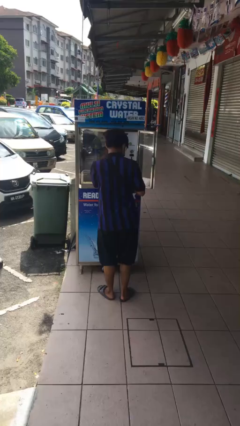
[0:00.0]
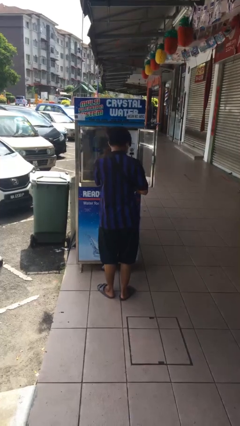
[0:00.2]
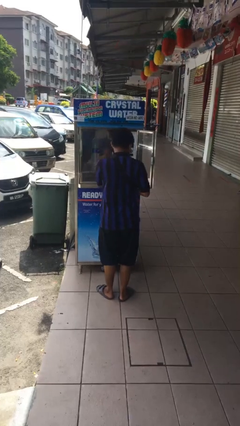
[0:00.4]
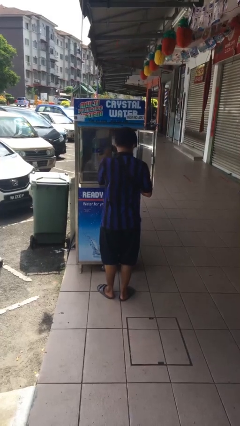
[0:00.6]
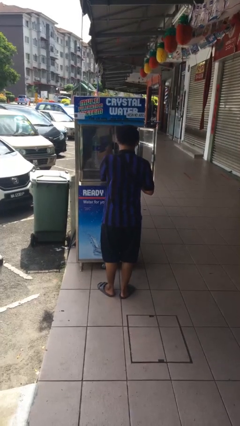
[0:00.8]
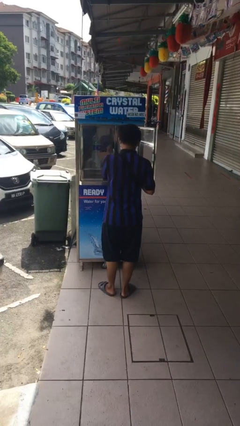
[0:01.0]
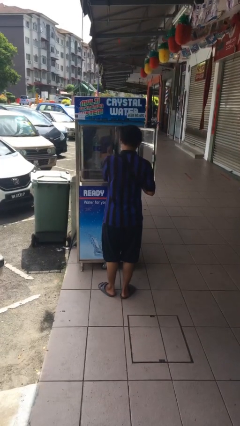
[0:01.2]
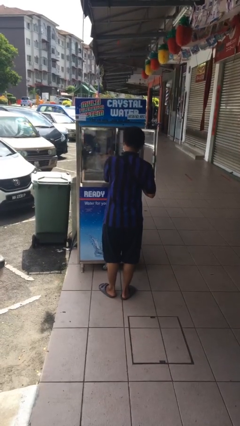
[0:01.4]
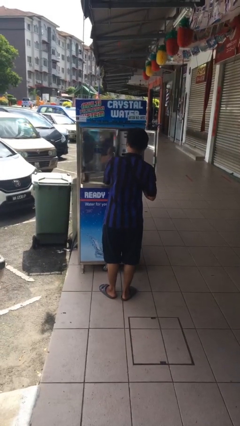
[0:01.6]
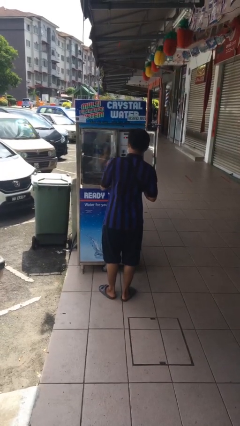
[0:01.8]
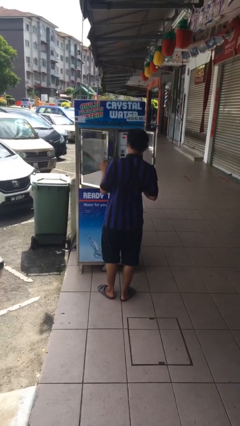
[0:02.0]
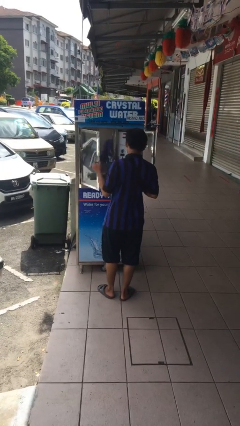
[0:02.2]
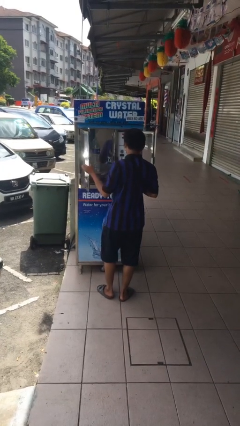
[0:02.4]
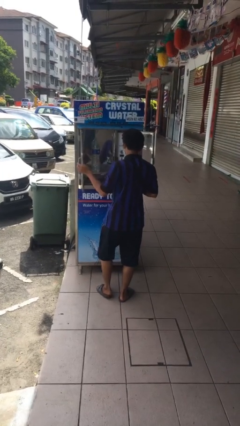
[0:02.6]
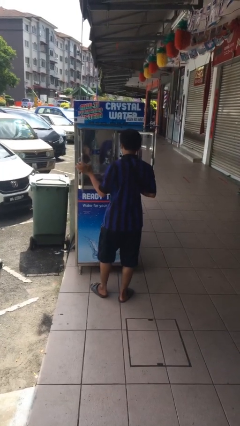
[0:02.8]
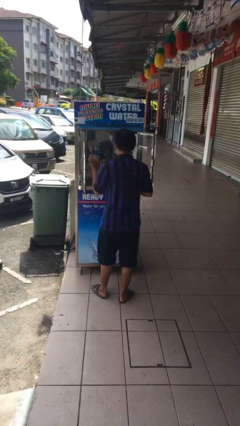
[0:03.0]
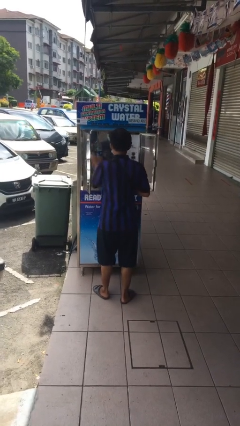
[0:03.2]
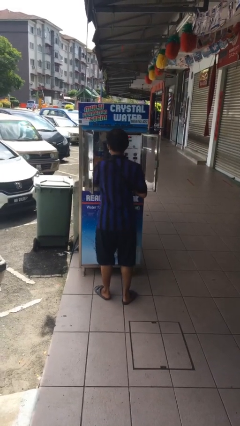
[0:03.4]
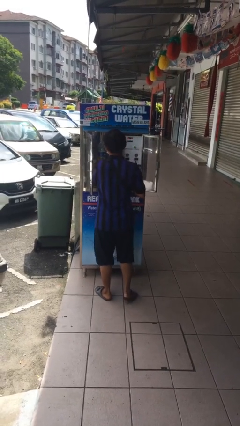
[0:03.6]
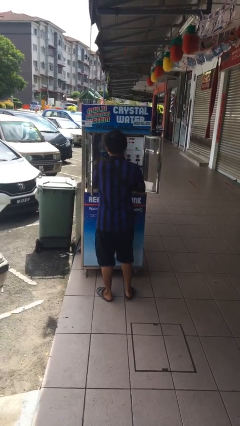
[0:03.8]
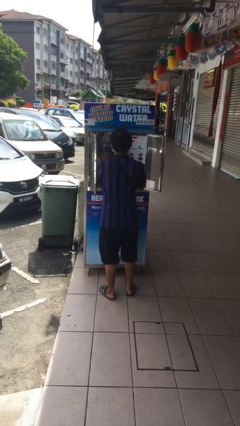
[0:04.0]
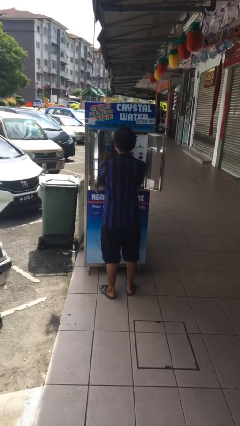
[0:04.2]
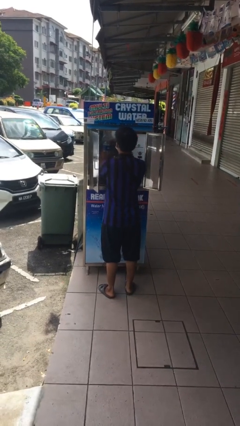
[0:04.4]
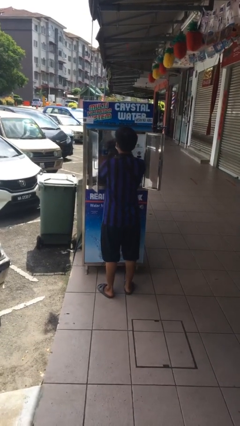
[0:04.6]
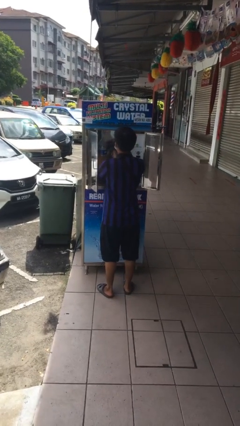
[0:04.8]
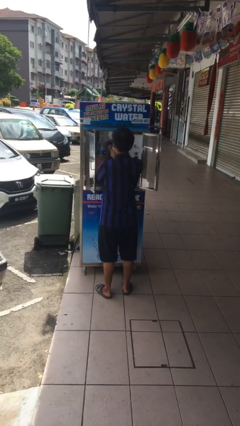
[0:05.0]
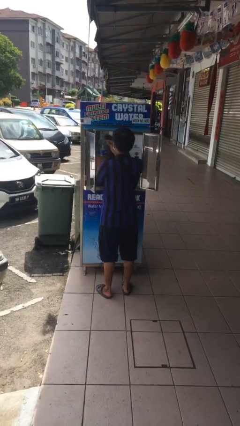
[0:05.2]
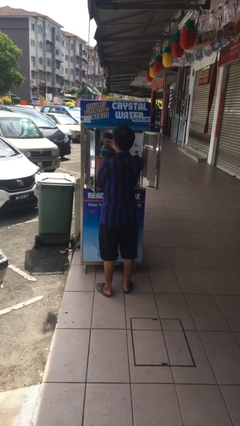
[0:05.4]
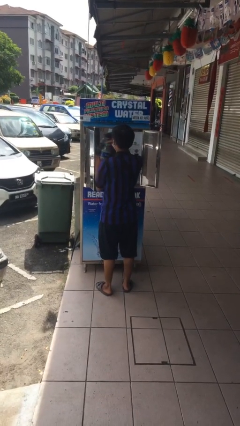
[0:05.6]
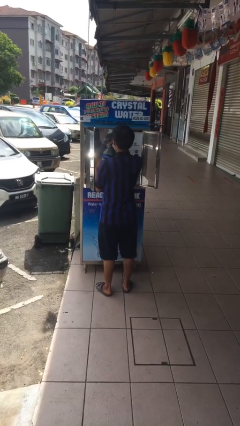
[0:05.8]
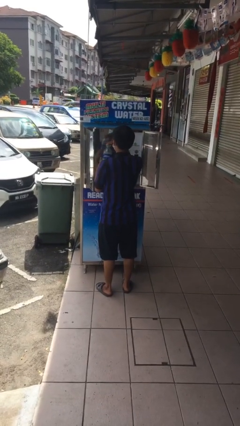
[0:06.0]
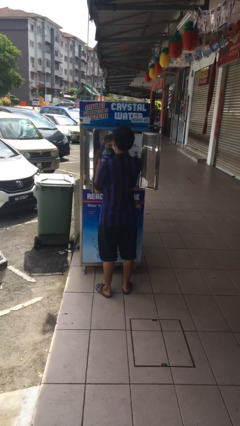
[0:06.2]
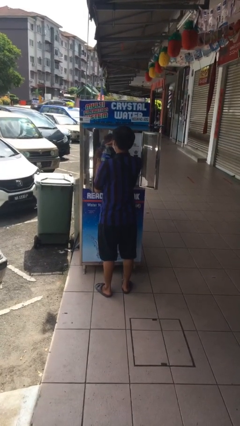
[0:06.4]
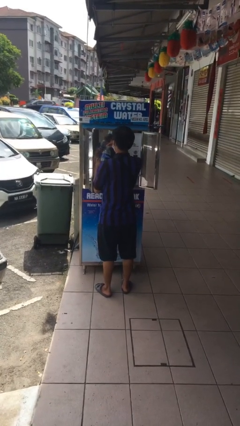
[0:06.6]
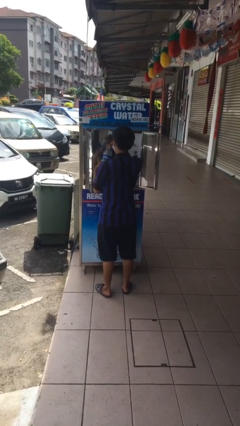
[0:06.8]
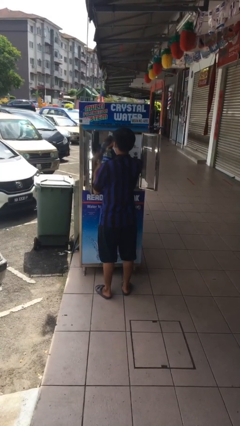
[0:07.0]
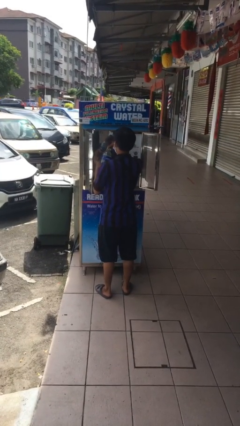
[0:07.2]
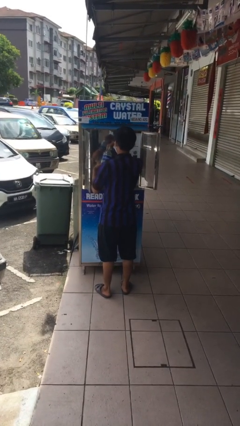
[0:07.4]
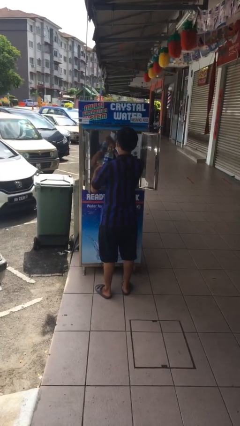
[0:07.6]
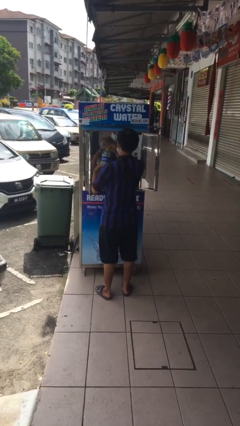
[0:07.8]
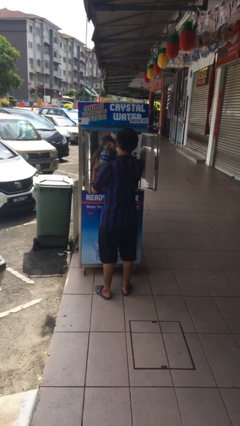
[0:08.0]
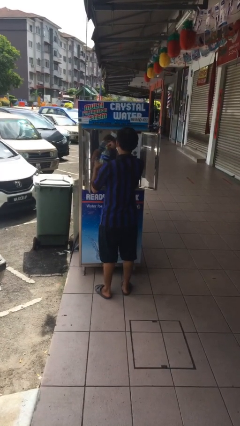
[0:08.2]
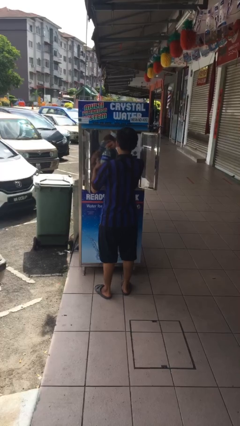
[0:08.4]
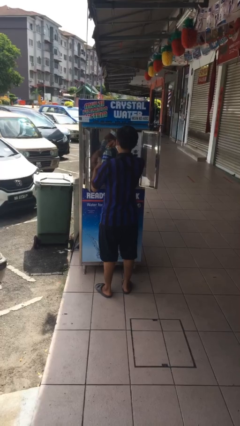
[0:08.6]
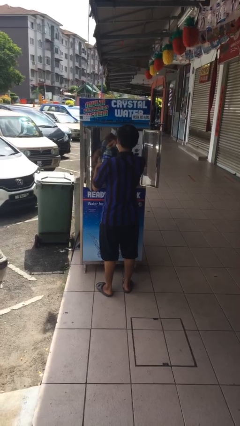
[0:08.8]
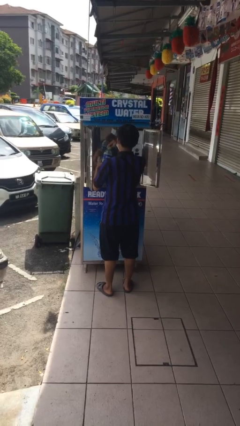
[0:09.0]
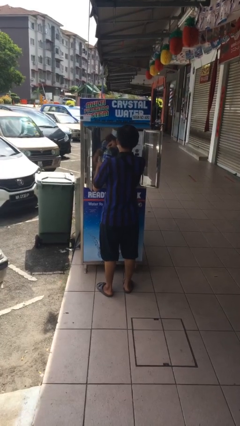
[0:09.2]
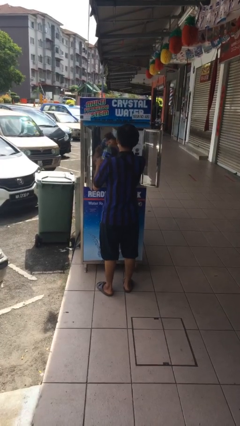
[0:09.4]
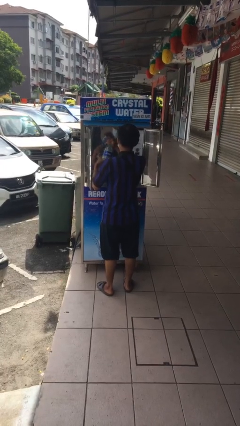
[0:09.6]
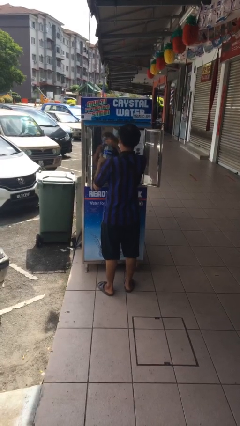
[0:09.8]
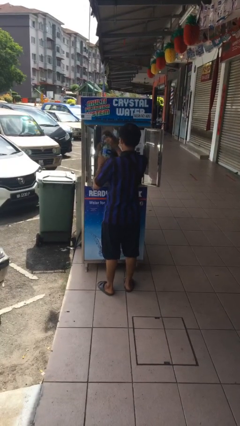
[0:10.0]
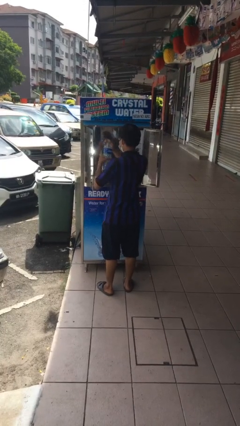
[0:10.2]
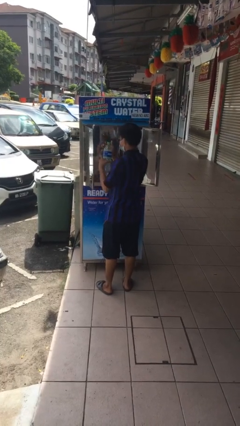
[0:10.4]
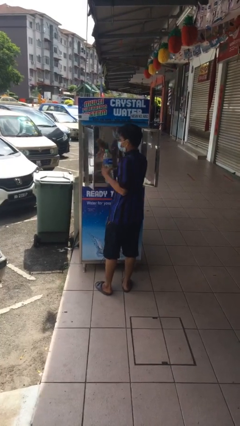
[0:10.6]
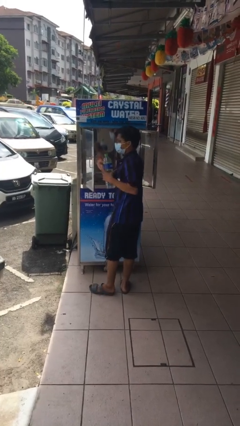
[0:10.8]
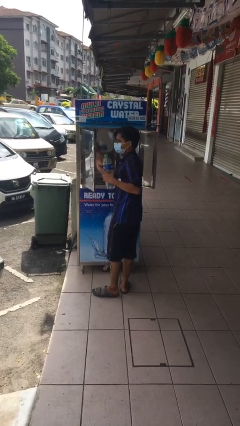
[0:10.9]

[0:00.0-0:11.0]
person purchases from machine

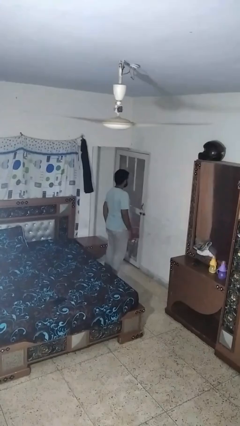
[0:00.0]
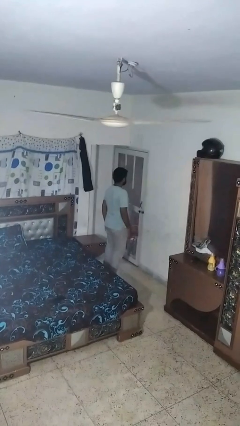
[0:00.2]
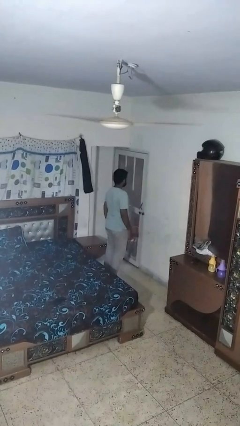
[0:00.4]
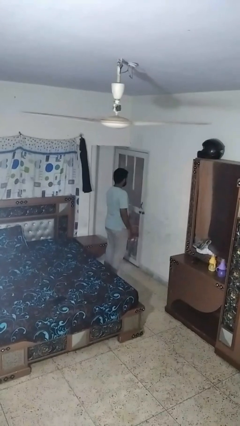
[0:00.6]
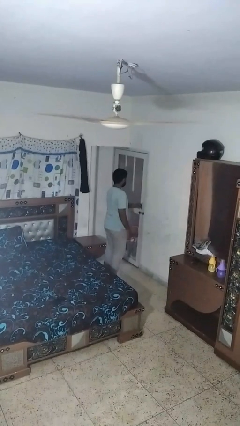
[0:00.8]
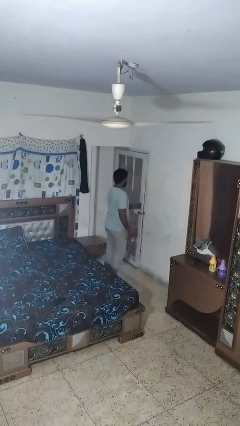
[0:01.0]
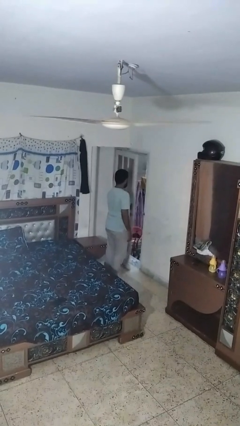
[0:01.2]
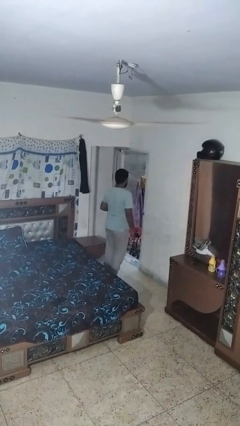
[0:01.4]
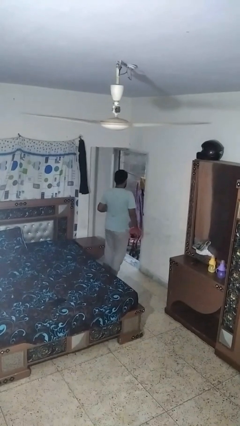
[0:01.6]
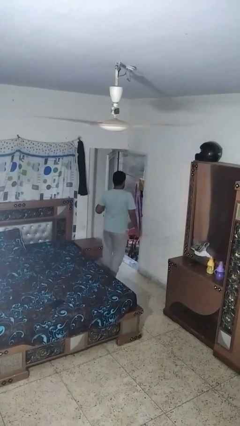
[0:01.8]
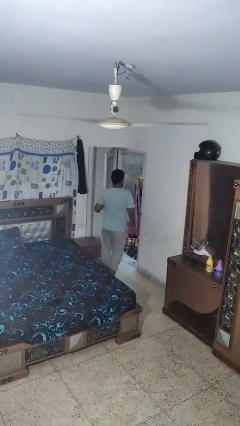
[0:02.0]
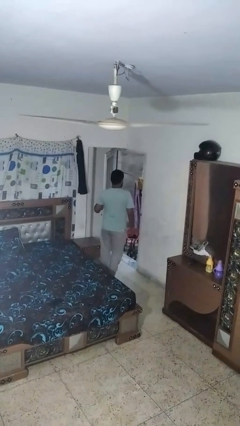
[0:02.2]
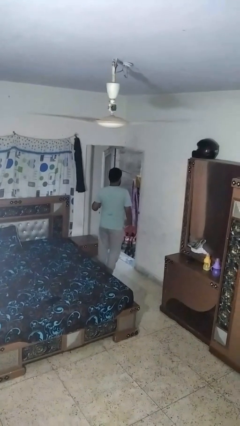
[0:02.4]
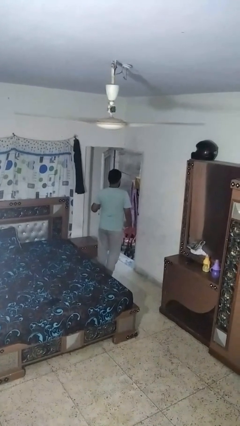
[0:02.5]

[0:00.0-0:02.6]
person opens gate

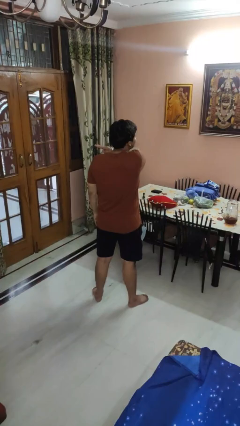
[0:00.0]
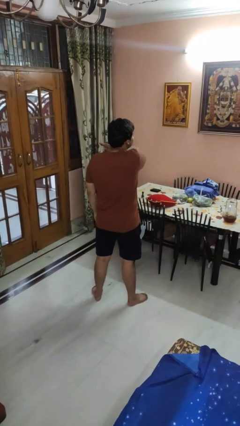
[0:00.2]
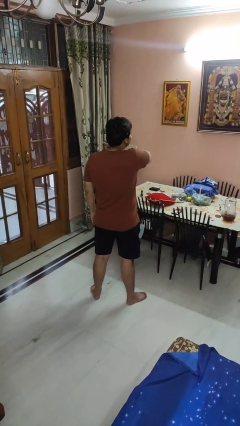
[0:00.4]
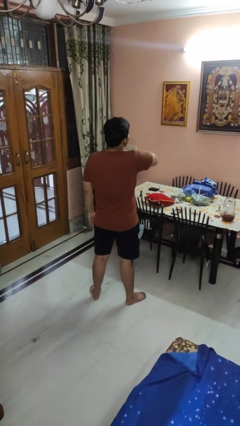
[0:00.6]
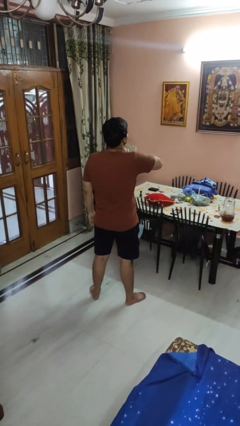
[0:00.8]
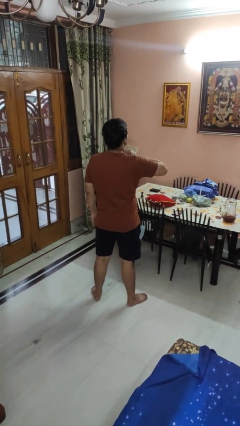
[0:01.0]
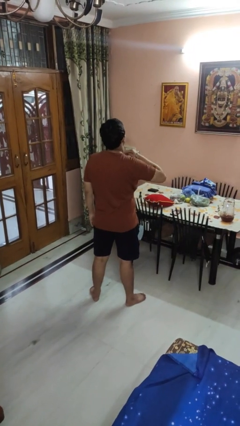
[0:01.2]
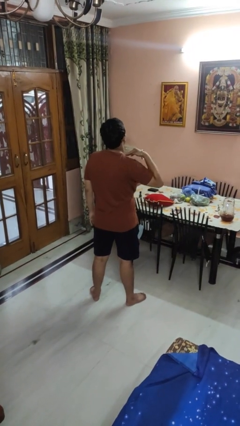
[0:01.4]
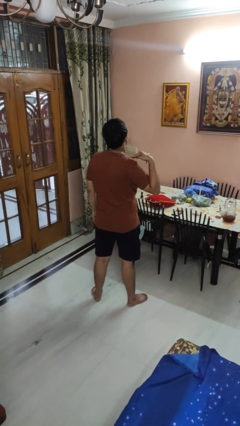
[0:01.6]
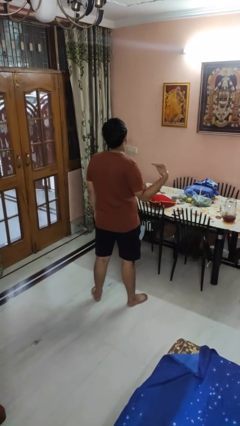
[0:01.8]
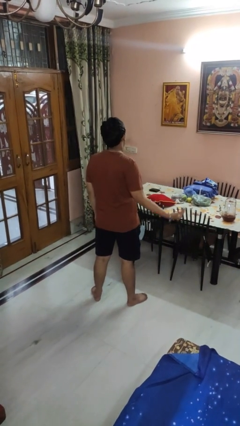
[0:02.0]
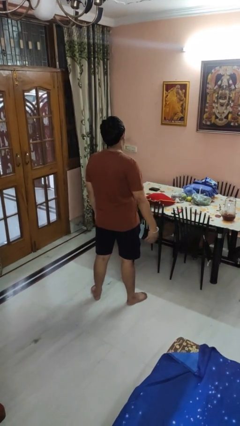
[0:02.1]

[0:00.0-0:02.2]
person gestures cut

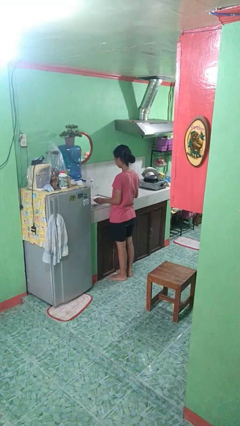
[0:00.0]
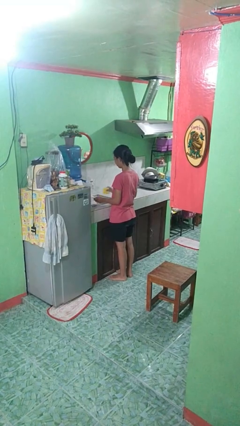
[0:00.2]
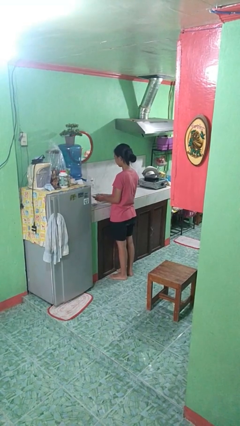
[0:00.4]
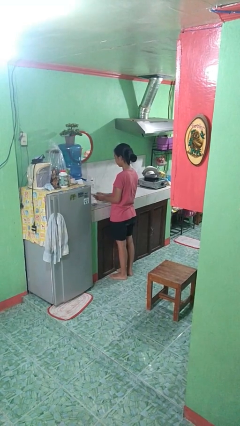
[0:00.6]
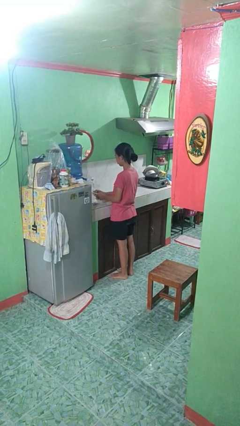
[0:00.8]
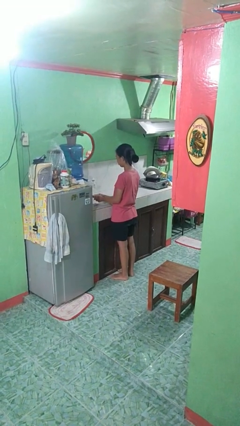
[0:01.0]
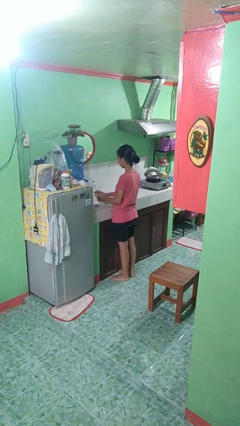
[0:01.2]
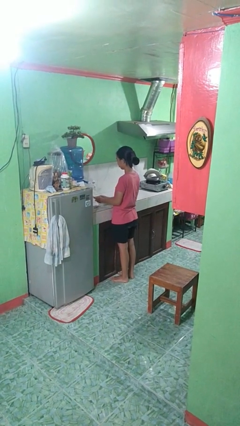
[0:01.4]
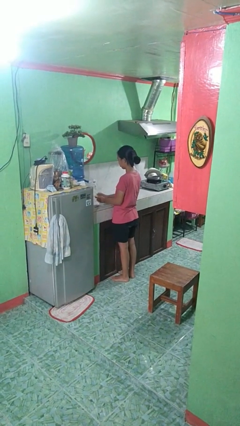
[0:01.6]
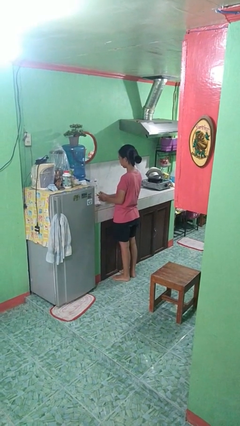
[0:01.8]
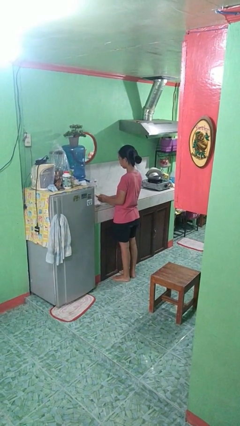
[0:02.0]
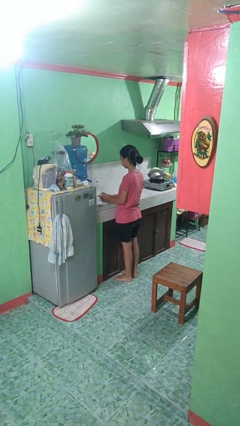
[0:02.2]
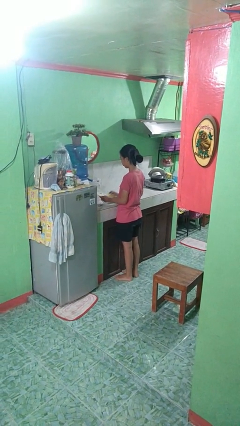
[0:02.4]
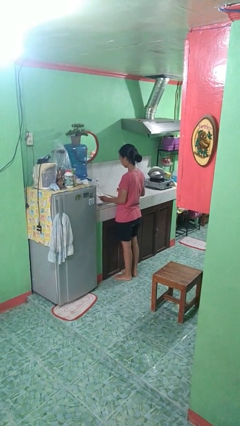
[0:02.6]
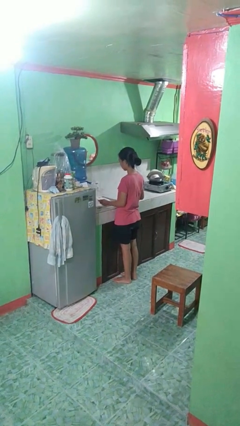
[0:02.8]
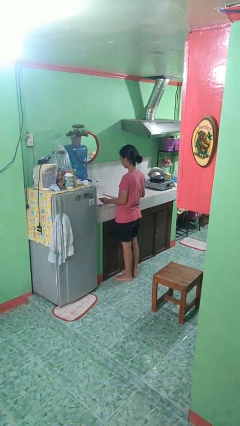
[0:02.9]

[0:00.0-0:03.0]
person washes dish
